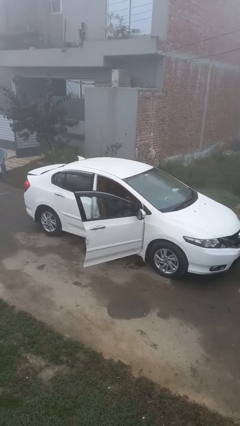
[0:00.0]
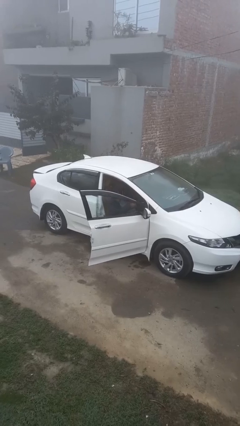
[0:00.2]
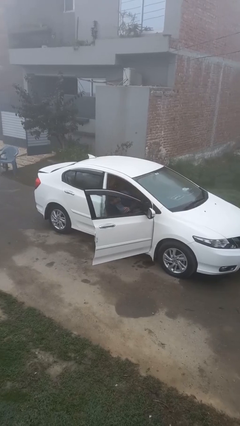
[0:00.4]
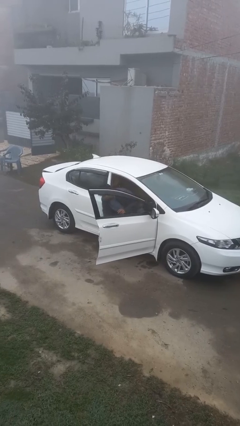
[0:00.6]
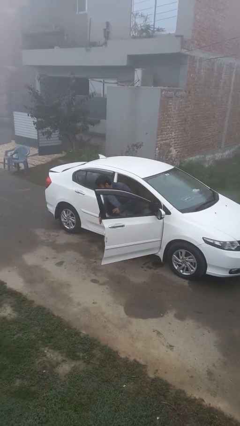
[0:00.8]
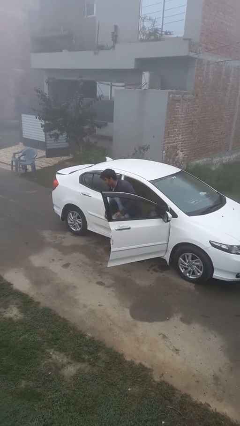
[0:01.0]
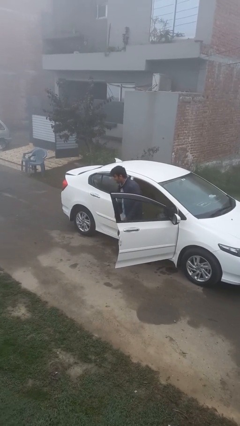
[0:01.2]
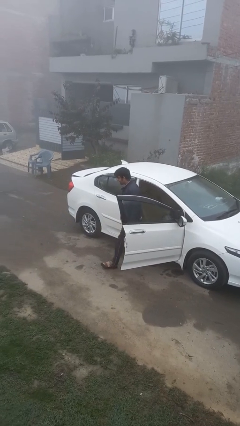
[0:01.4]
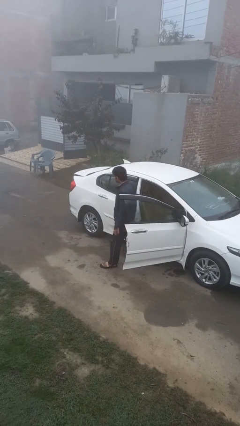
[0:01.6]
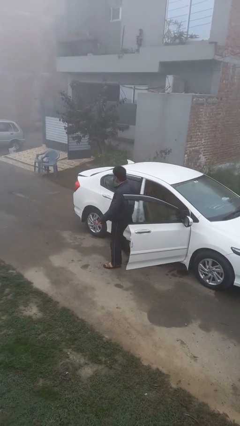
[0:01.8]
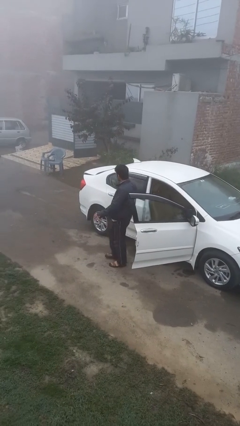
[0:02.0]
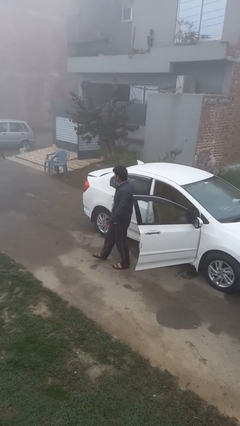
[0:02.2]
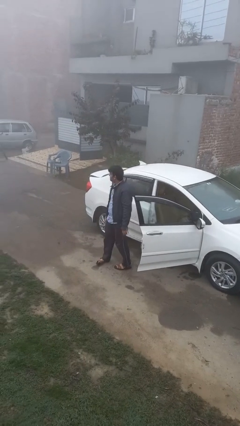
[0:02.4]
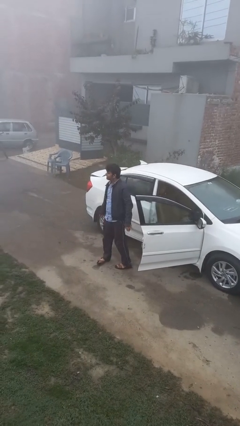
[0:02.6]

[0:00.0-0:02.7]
person exits car

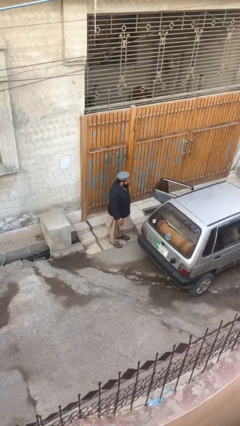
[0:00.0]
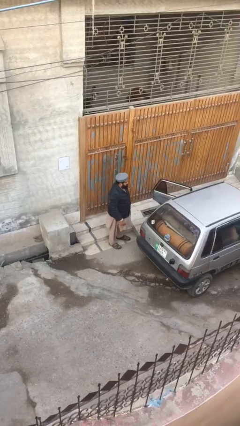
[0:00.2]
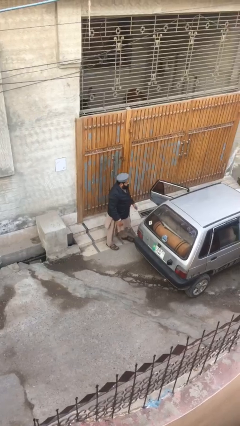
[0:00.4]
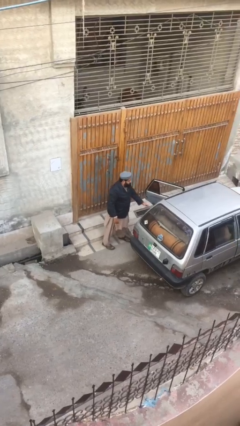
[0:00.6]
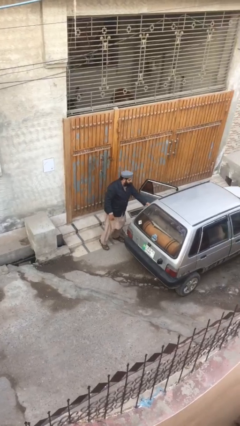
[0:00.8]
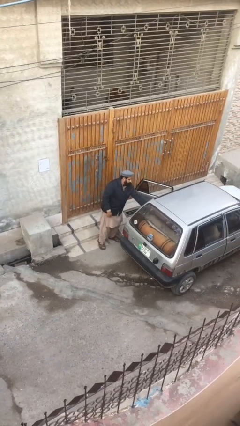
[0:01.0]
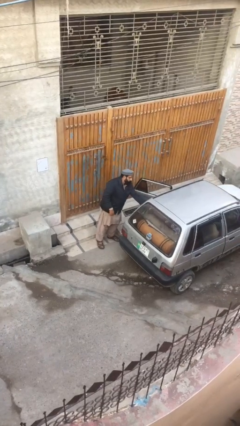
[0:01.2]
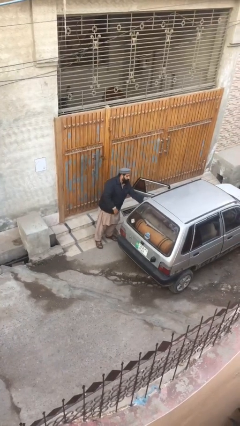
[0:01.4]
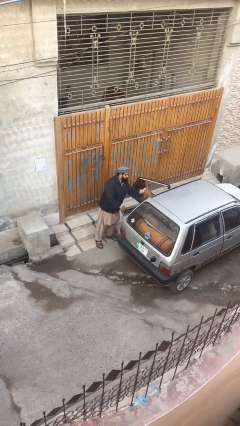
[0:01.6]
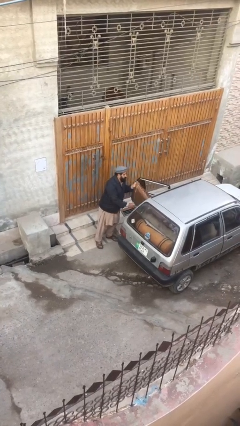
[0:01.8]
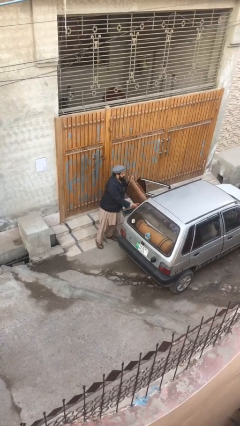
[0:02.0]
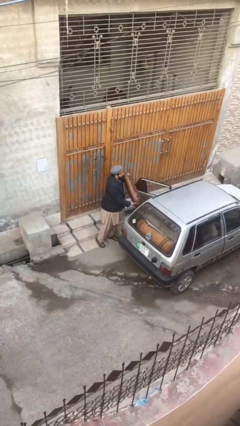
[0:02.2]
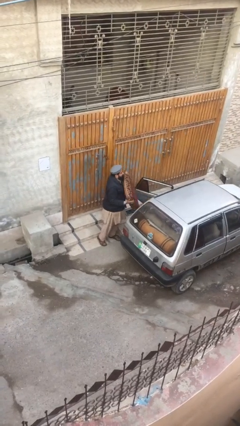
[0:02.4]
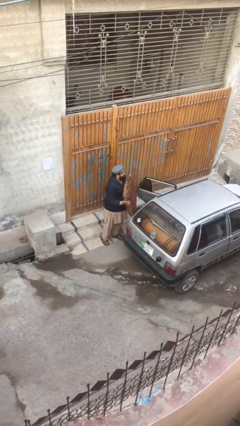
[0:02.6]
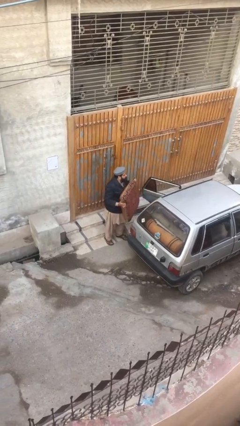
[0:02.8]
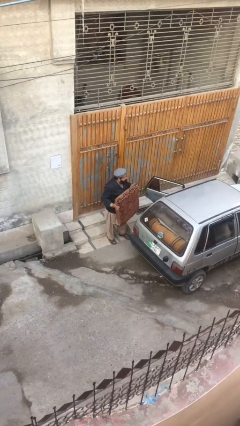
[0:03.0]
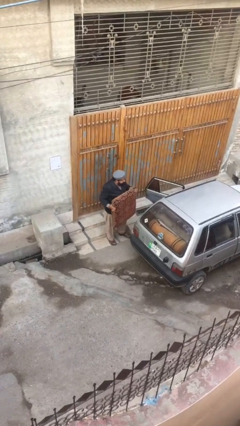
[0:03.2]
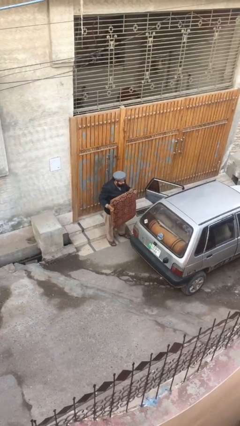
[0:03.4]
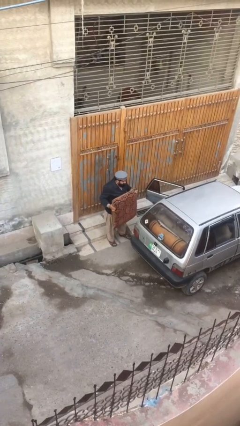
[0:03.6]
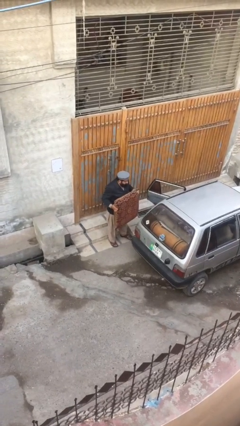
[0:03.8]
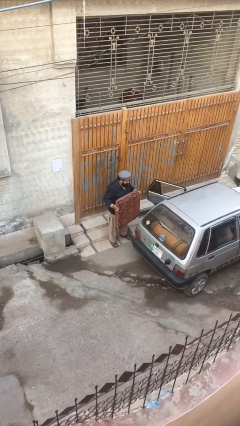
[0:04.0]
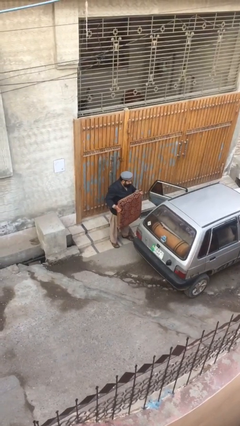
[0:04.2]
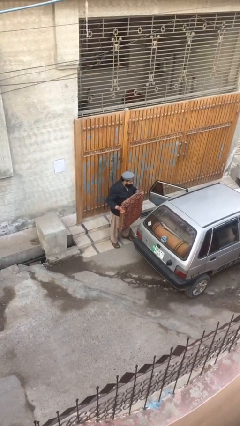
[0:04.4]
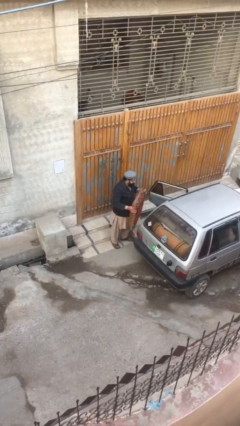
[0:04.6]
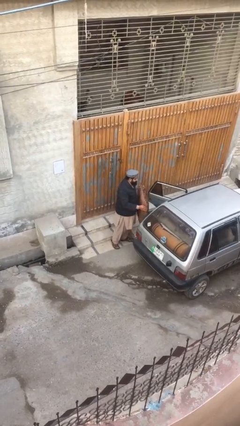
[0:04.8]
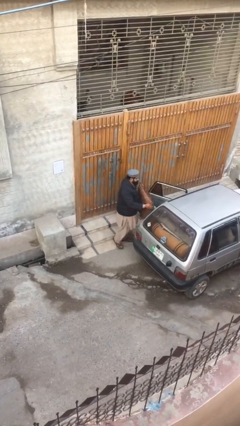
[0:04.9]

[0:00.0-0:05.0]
person unloads car

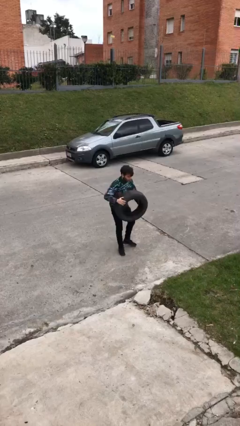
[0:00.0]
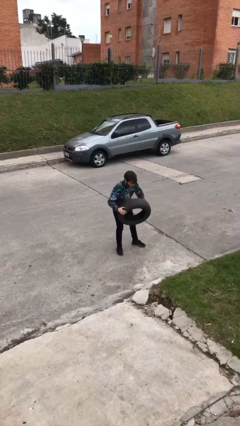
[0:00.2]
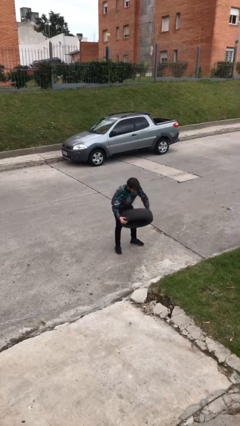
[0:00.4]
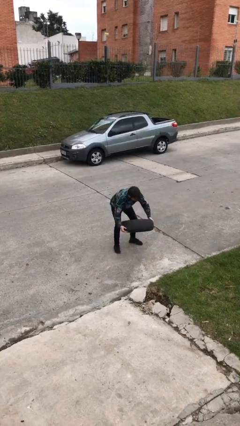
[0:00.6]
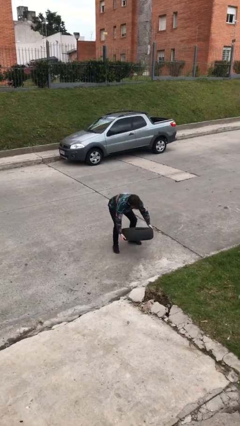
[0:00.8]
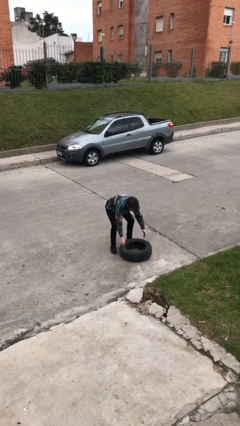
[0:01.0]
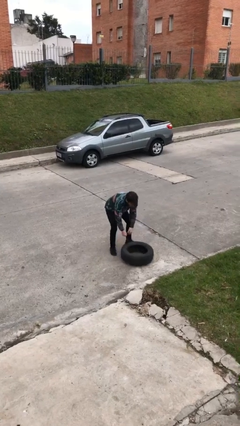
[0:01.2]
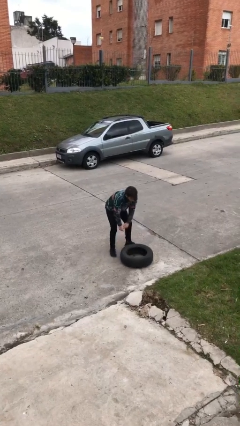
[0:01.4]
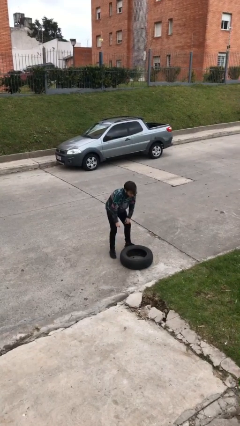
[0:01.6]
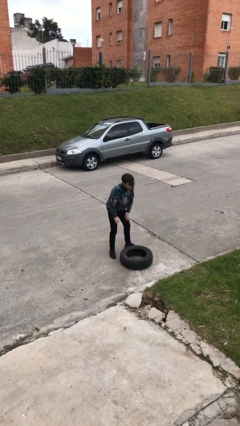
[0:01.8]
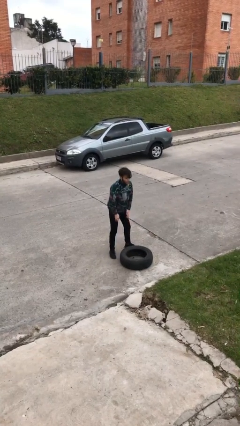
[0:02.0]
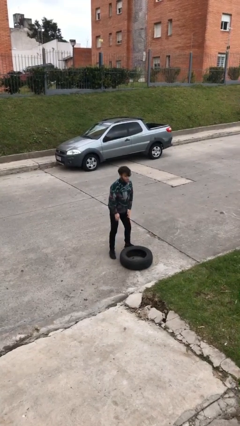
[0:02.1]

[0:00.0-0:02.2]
person puts down object on floor

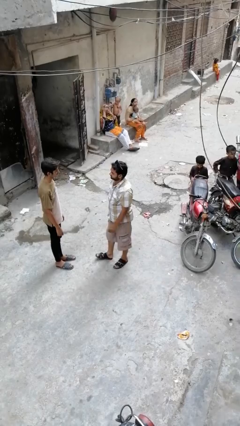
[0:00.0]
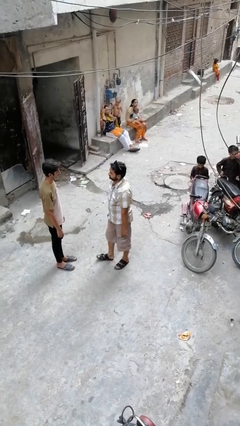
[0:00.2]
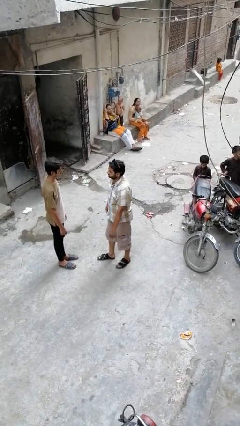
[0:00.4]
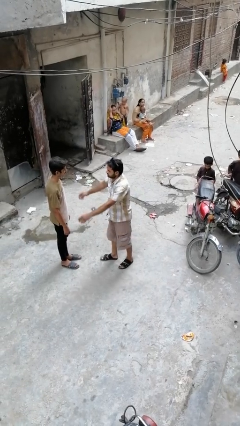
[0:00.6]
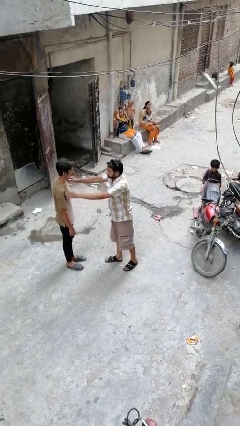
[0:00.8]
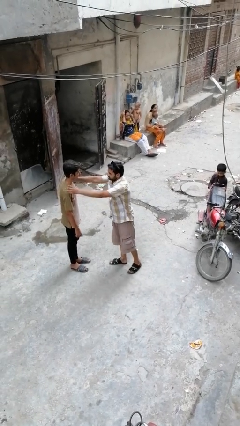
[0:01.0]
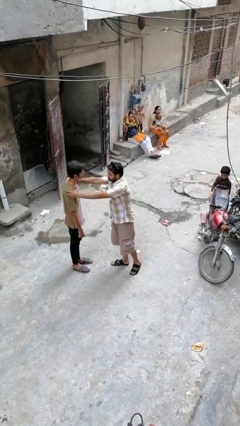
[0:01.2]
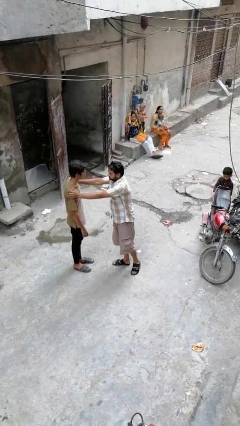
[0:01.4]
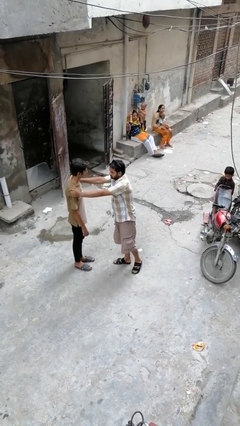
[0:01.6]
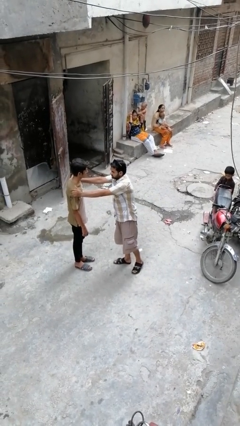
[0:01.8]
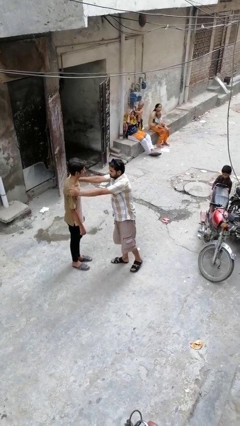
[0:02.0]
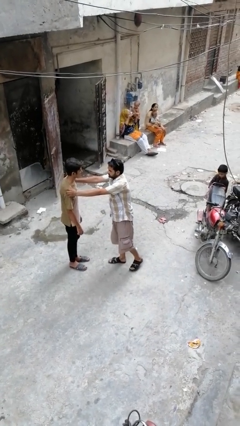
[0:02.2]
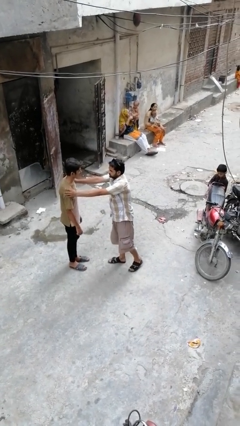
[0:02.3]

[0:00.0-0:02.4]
person pounds shoulders of person

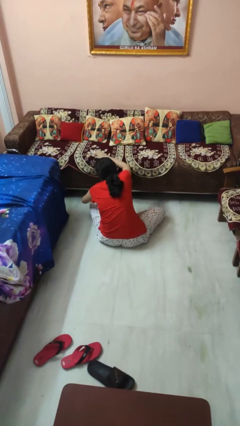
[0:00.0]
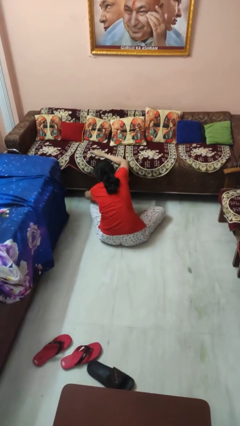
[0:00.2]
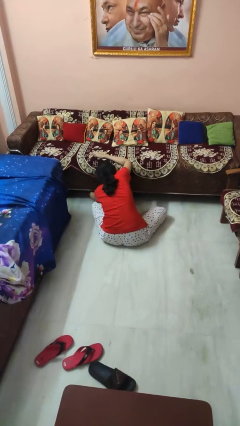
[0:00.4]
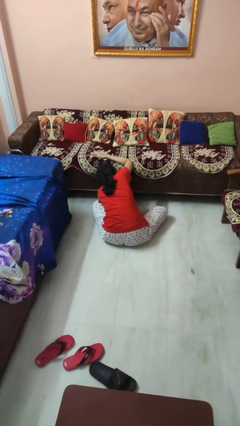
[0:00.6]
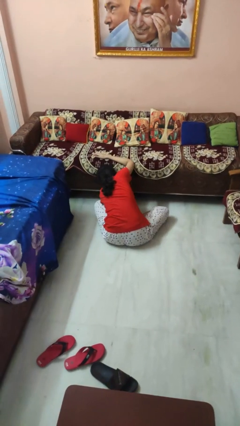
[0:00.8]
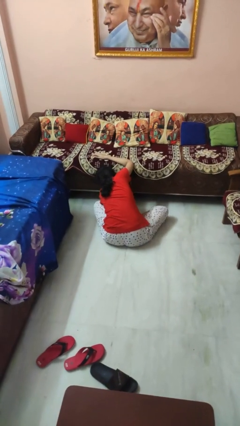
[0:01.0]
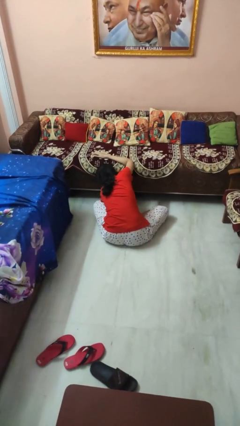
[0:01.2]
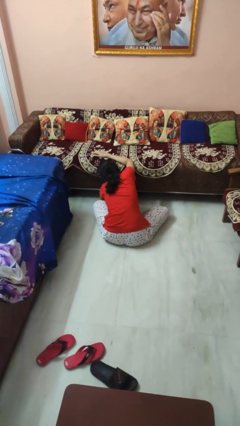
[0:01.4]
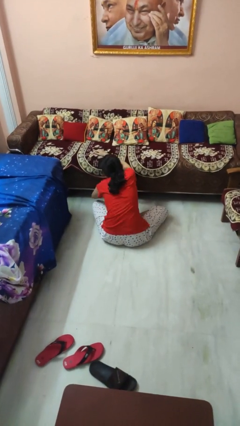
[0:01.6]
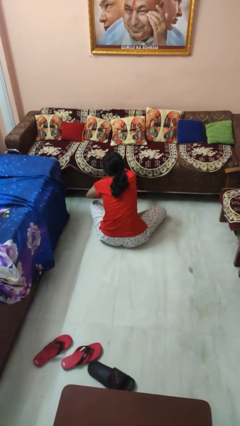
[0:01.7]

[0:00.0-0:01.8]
person searches under couch

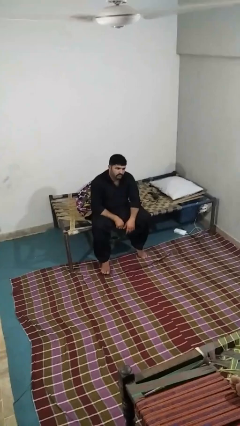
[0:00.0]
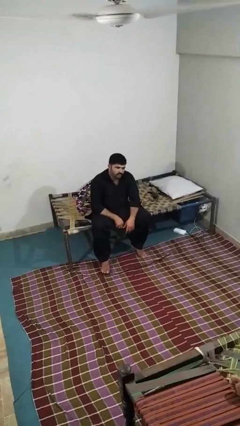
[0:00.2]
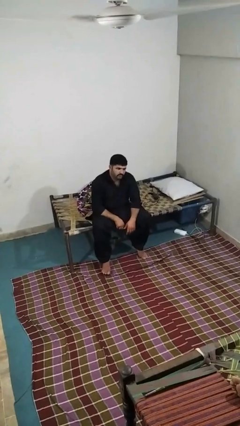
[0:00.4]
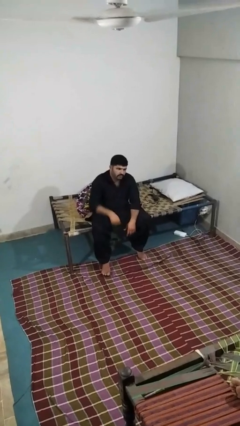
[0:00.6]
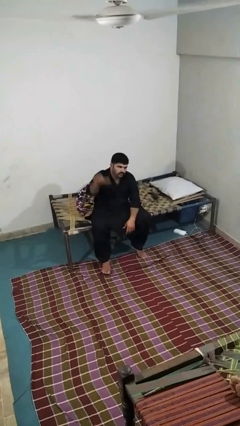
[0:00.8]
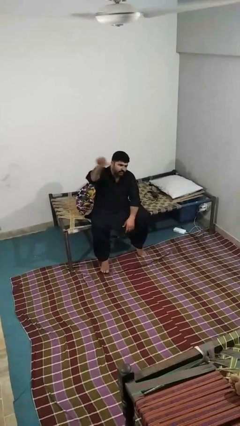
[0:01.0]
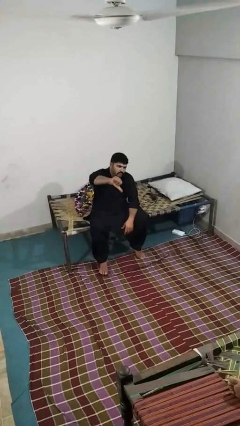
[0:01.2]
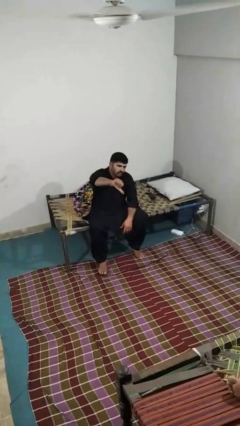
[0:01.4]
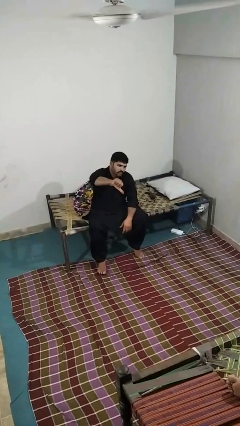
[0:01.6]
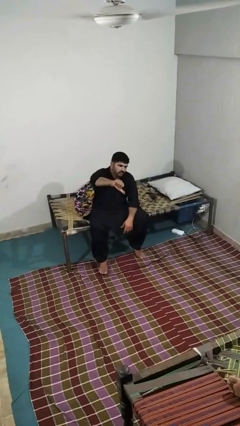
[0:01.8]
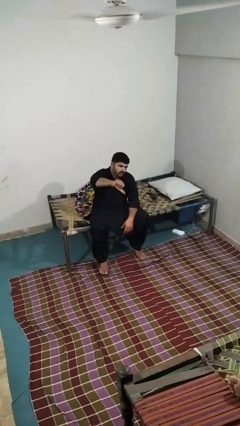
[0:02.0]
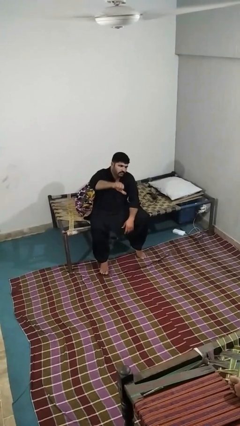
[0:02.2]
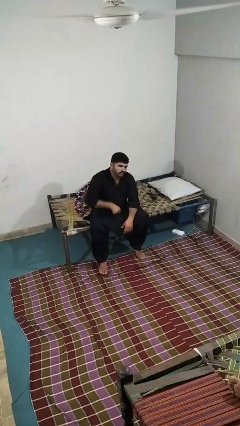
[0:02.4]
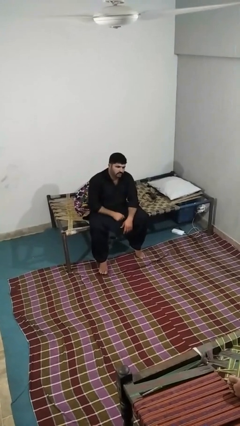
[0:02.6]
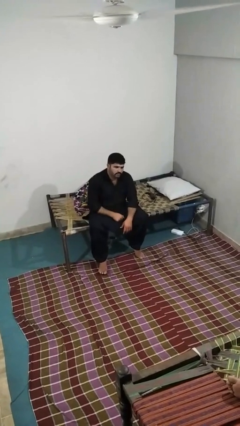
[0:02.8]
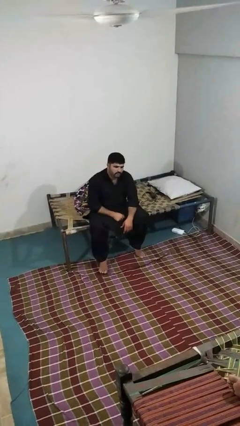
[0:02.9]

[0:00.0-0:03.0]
person gestures thumbs down
